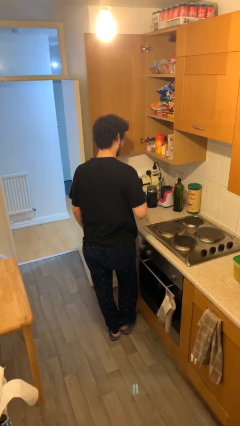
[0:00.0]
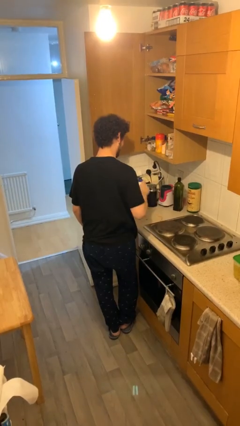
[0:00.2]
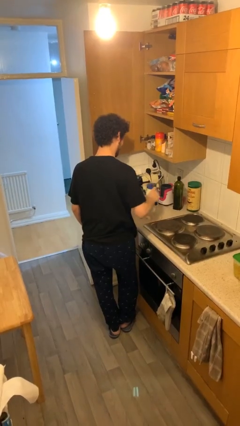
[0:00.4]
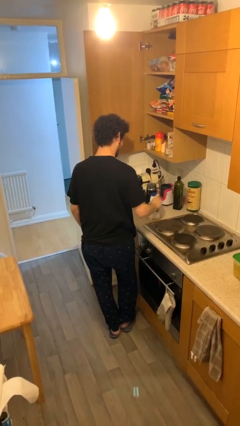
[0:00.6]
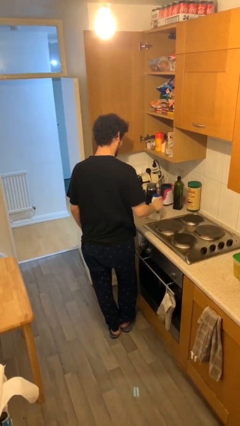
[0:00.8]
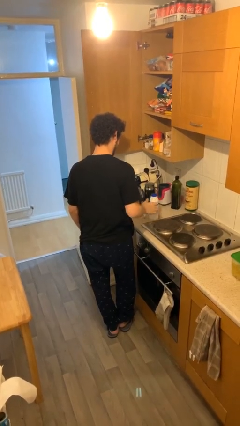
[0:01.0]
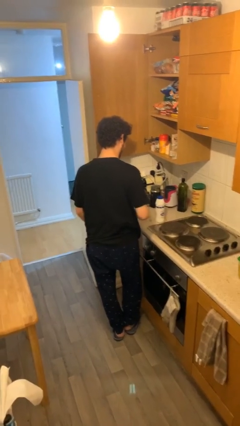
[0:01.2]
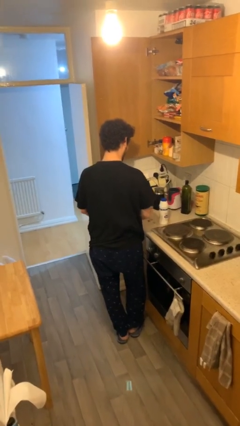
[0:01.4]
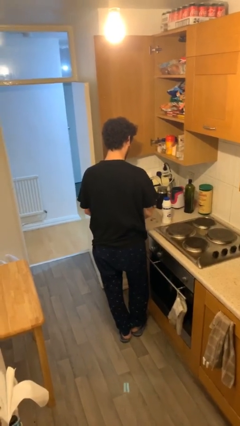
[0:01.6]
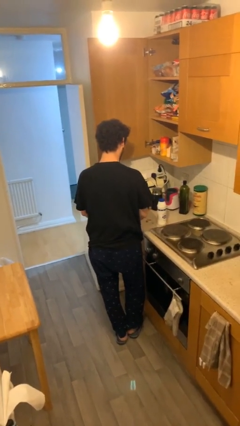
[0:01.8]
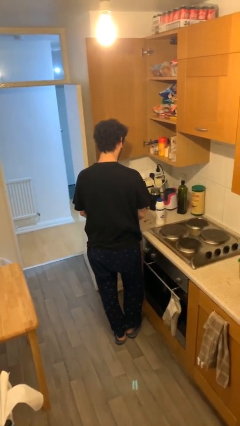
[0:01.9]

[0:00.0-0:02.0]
person puts down object on table

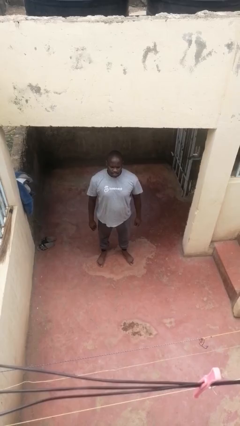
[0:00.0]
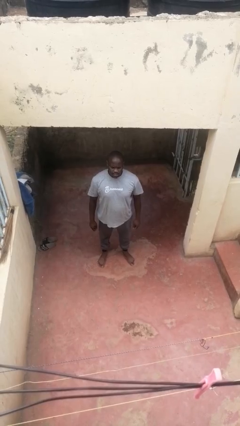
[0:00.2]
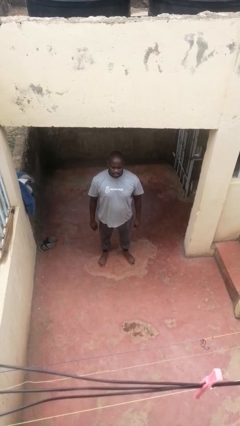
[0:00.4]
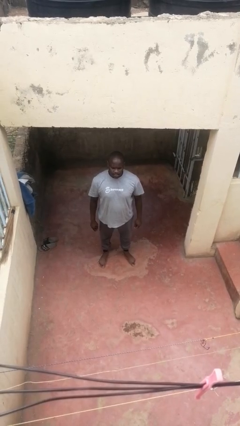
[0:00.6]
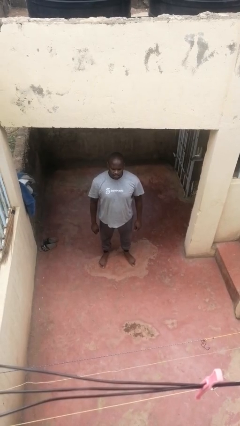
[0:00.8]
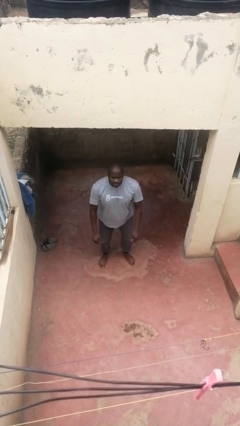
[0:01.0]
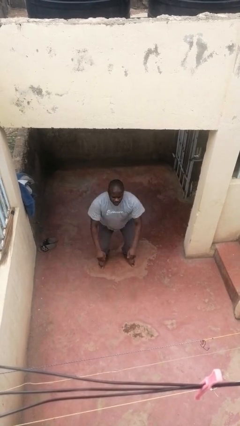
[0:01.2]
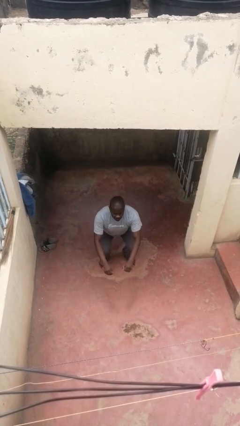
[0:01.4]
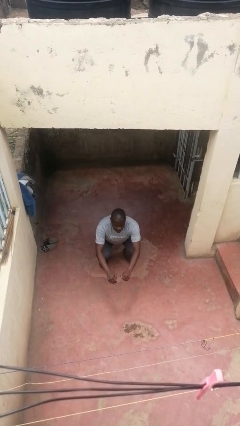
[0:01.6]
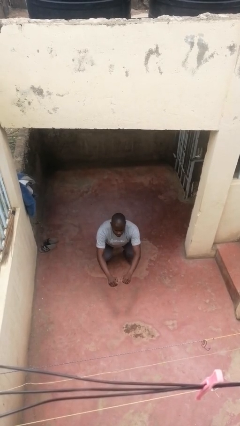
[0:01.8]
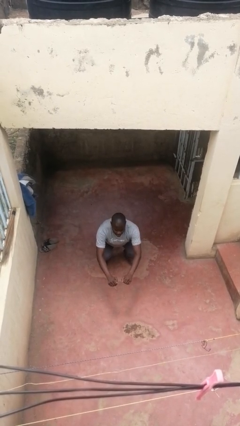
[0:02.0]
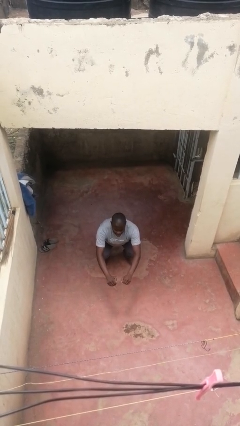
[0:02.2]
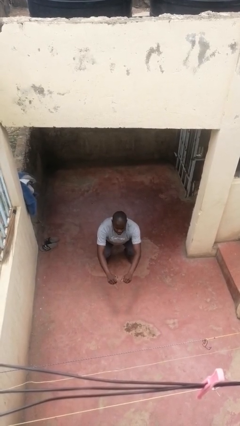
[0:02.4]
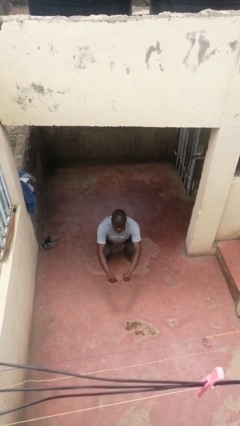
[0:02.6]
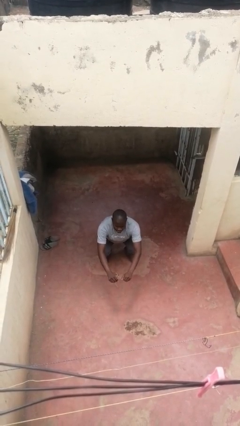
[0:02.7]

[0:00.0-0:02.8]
person squats

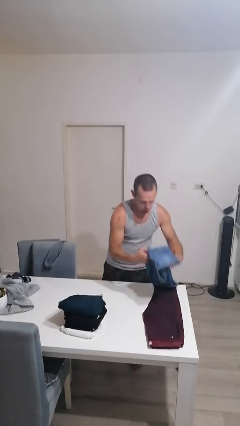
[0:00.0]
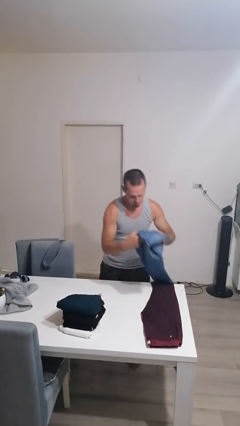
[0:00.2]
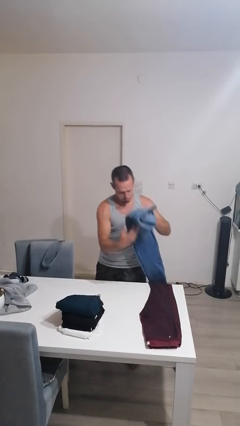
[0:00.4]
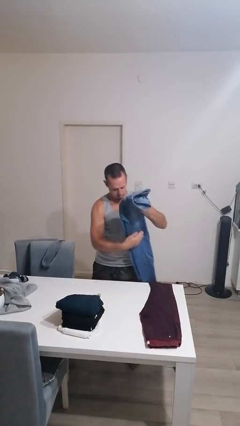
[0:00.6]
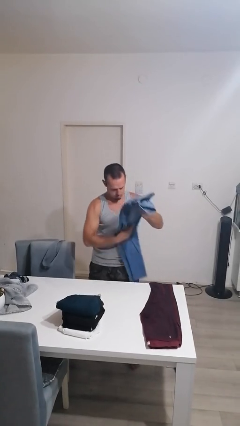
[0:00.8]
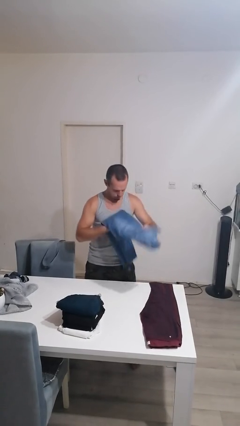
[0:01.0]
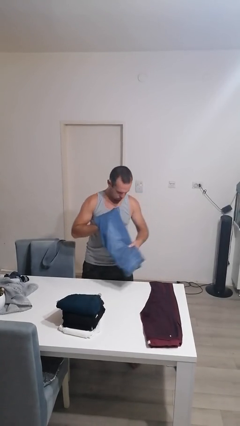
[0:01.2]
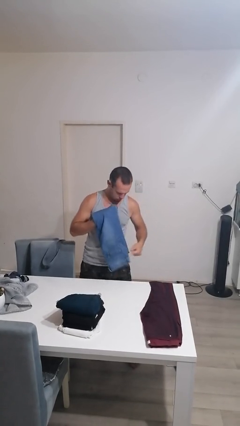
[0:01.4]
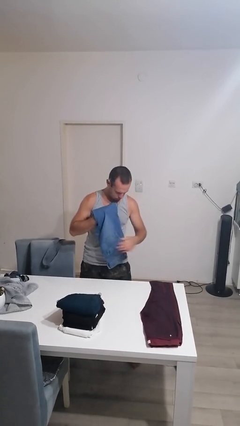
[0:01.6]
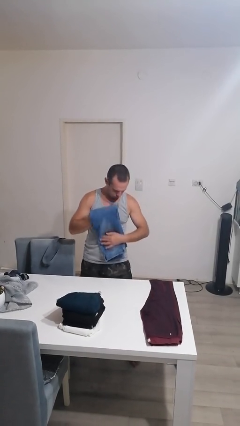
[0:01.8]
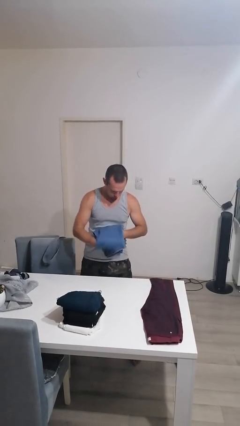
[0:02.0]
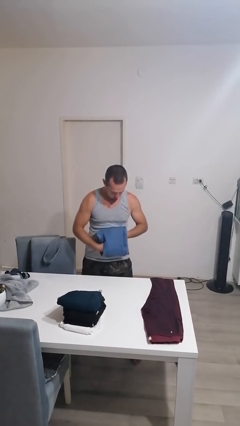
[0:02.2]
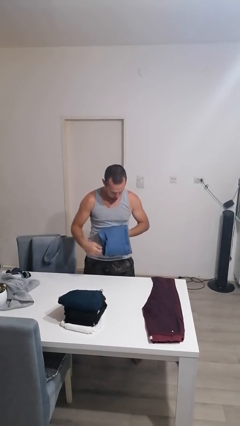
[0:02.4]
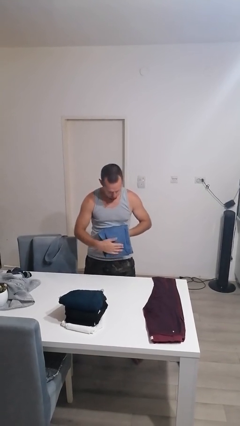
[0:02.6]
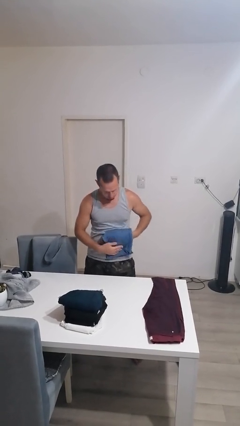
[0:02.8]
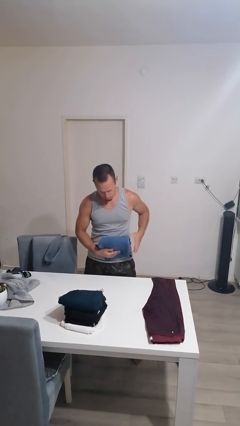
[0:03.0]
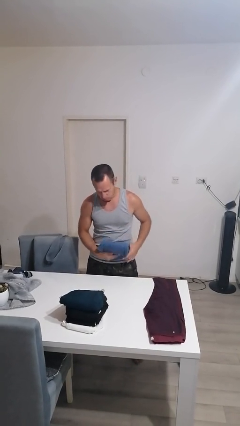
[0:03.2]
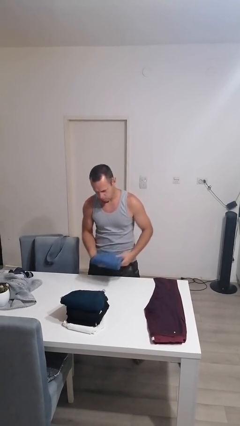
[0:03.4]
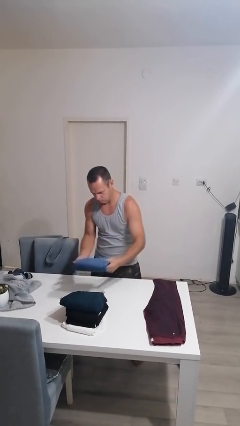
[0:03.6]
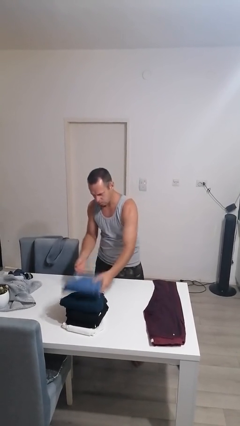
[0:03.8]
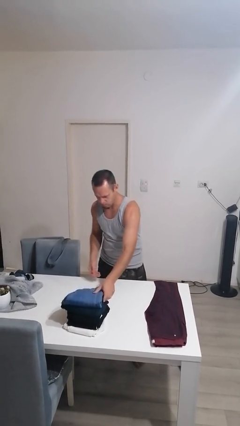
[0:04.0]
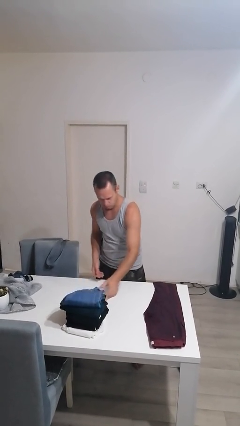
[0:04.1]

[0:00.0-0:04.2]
person folds pants

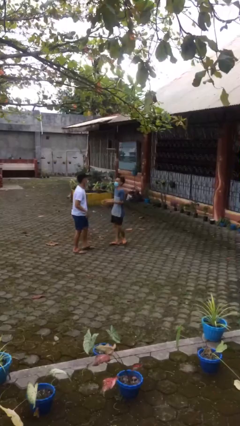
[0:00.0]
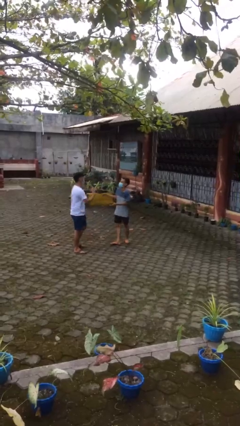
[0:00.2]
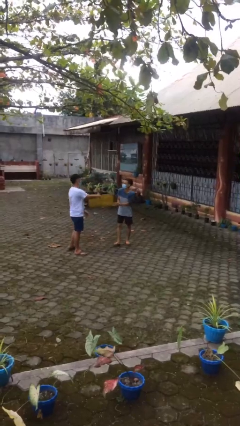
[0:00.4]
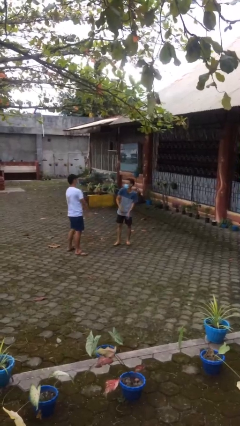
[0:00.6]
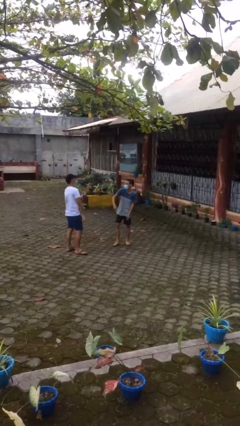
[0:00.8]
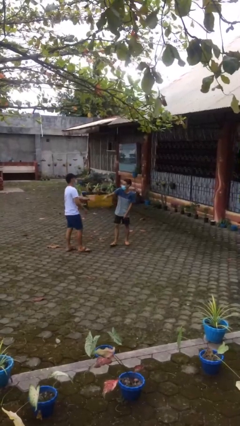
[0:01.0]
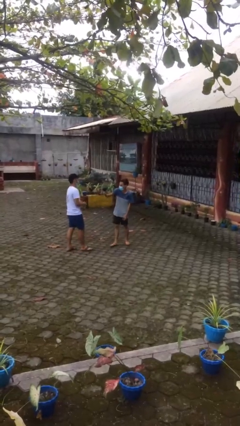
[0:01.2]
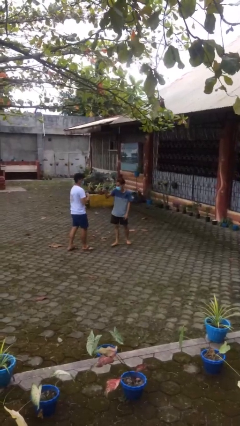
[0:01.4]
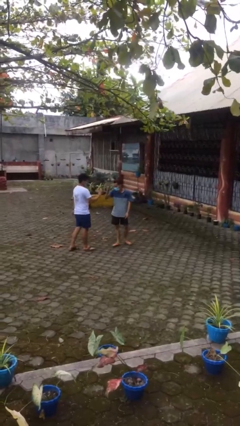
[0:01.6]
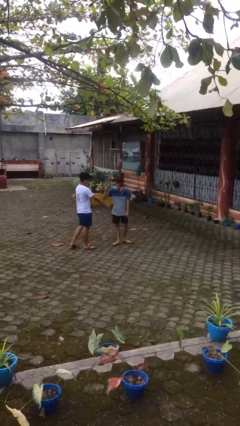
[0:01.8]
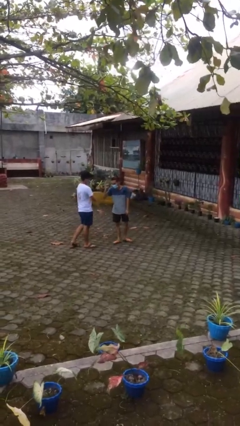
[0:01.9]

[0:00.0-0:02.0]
person talks to person

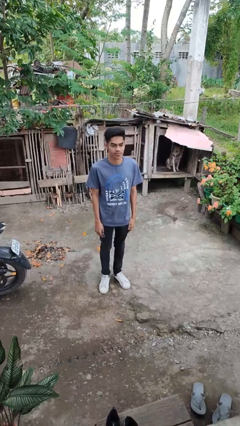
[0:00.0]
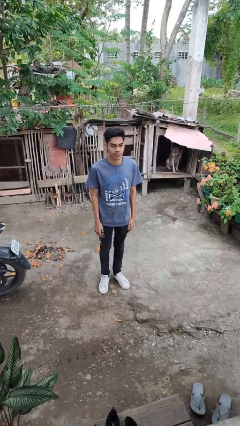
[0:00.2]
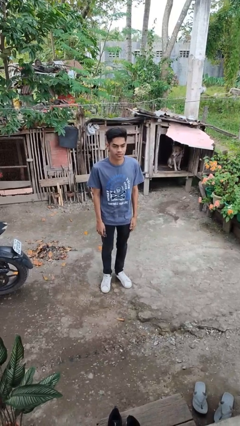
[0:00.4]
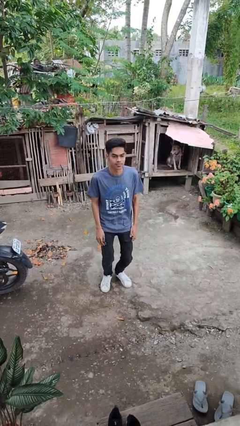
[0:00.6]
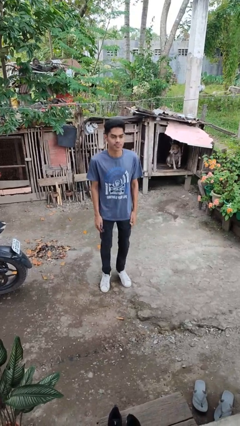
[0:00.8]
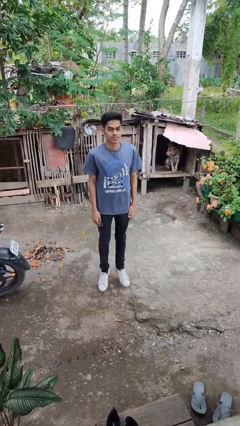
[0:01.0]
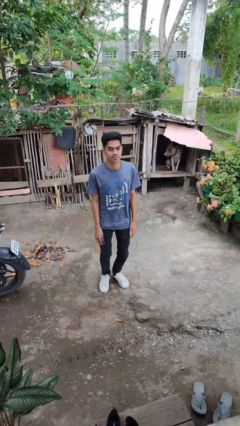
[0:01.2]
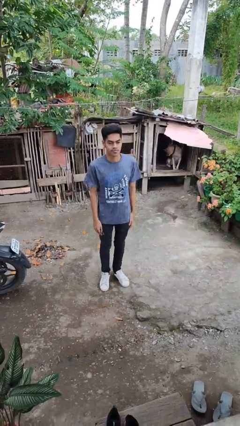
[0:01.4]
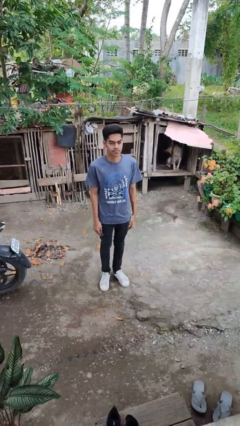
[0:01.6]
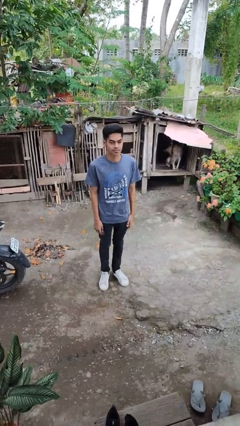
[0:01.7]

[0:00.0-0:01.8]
person jumps

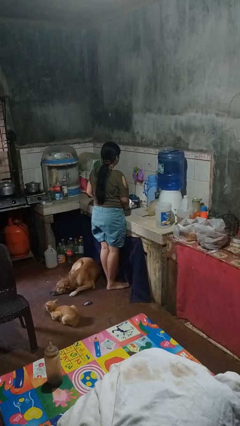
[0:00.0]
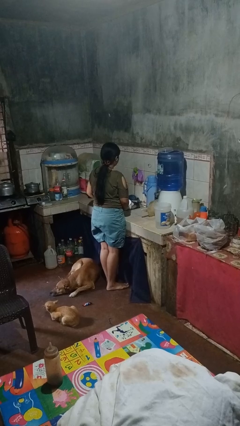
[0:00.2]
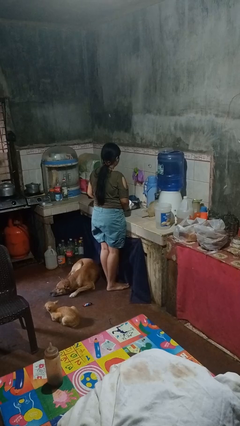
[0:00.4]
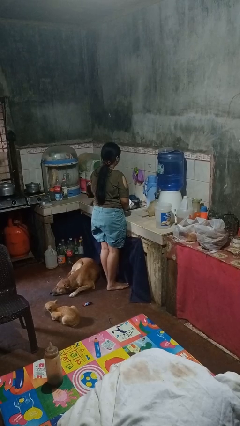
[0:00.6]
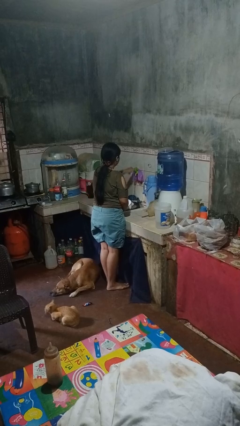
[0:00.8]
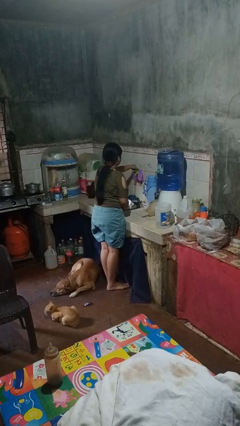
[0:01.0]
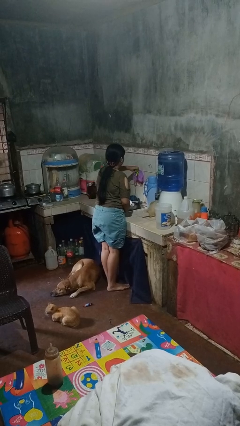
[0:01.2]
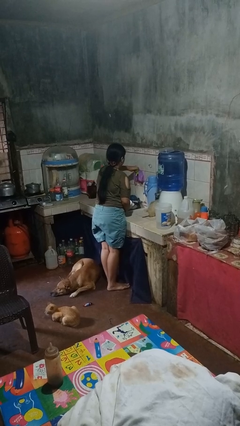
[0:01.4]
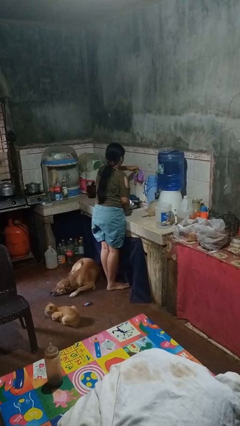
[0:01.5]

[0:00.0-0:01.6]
person turns off faucet

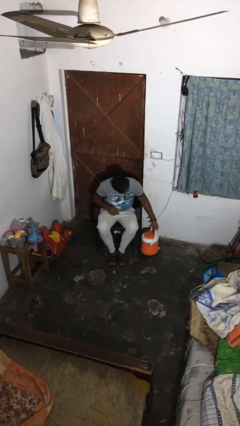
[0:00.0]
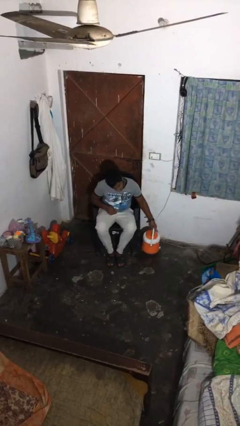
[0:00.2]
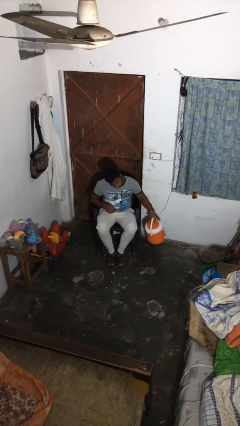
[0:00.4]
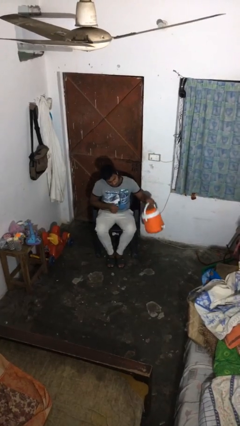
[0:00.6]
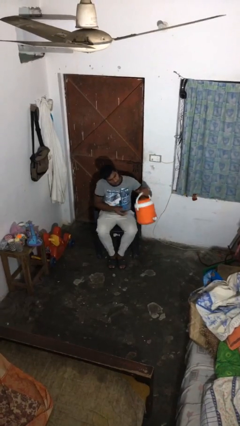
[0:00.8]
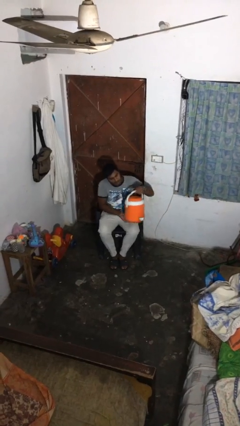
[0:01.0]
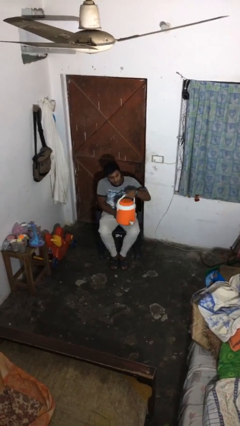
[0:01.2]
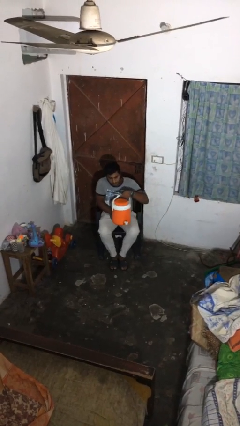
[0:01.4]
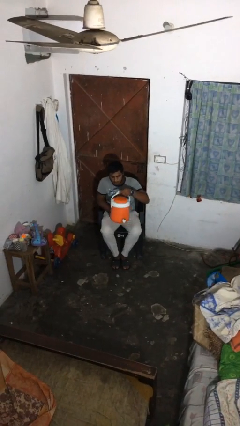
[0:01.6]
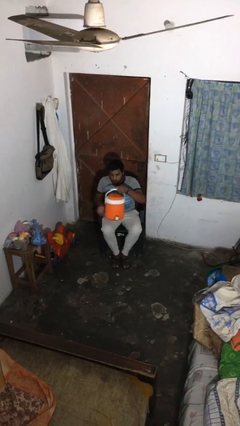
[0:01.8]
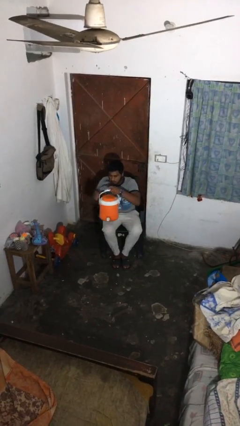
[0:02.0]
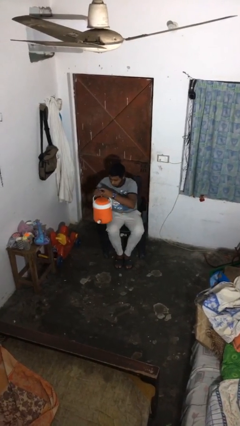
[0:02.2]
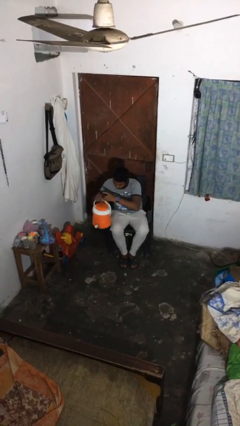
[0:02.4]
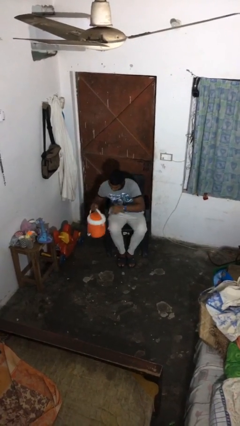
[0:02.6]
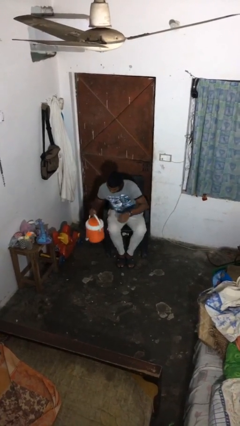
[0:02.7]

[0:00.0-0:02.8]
person picks up object from floor

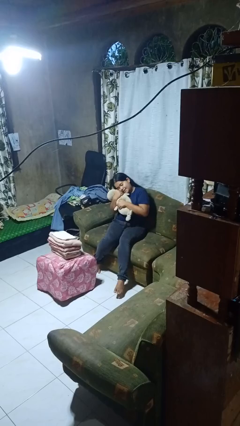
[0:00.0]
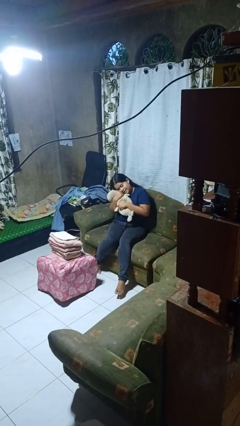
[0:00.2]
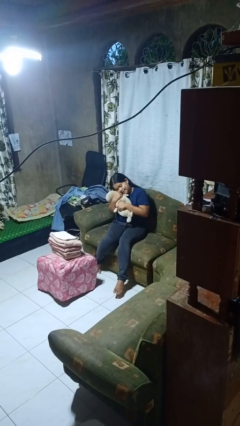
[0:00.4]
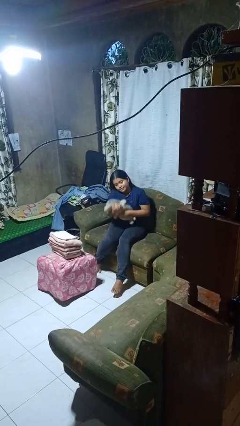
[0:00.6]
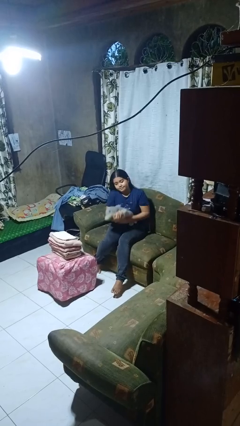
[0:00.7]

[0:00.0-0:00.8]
person hugs stuffed animal